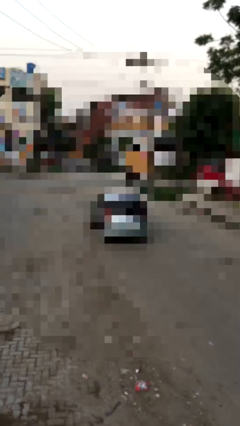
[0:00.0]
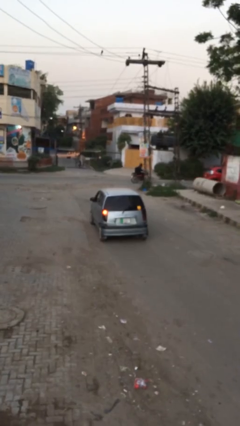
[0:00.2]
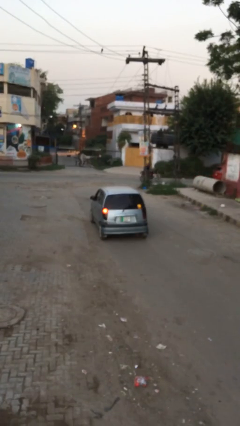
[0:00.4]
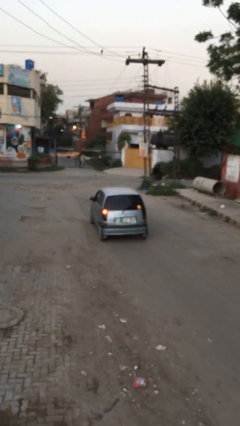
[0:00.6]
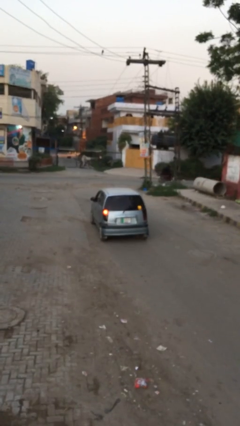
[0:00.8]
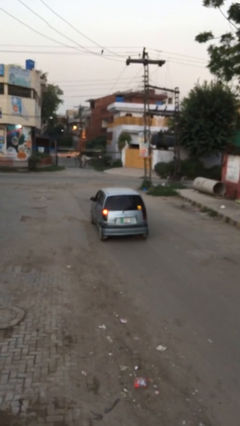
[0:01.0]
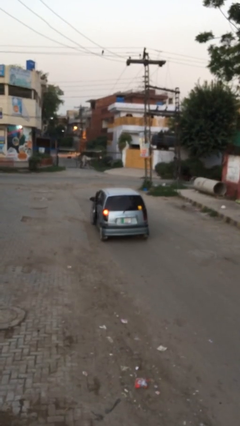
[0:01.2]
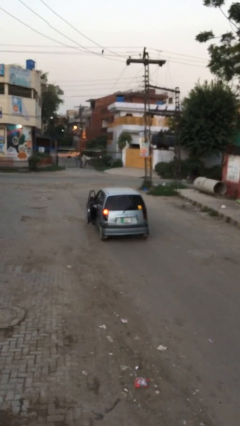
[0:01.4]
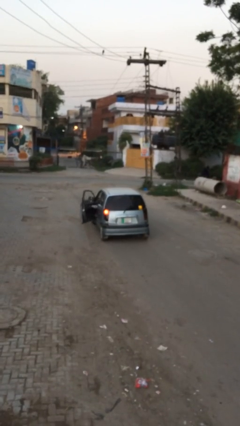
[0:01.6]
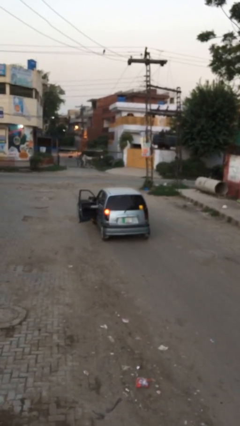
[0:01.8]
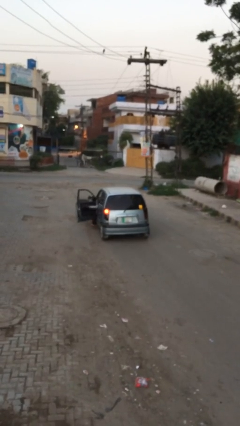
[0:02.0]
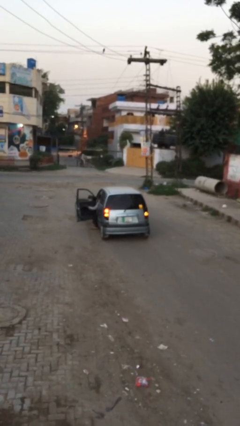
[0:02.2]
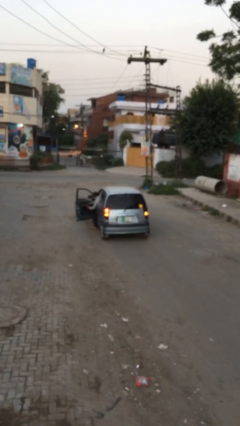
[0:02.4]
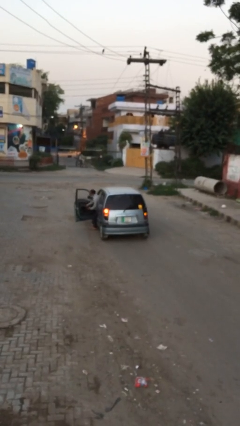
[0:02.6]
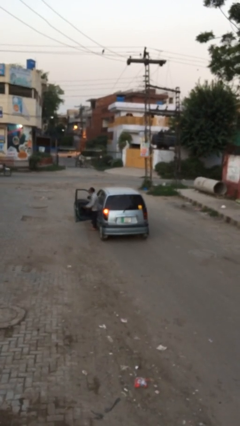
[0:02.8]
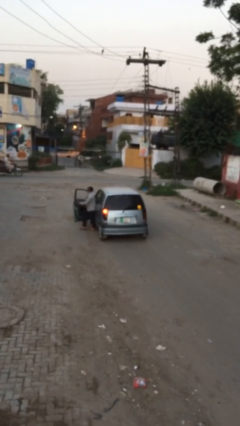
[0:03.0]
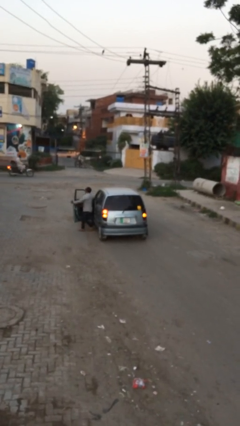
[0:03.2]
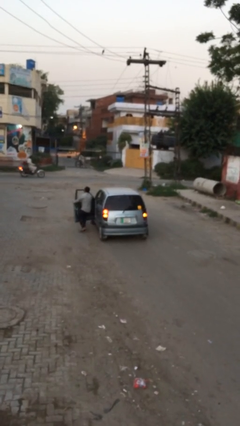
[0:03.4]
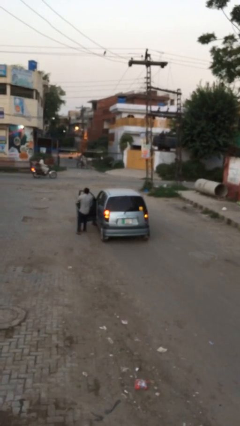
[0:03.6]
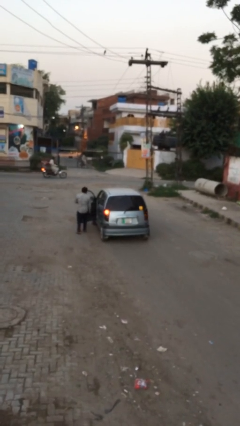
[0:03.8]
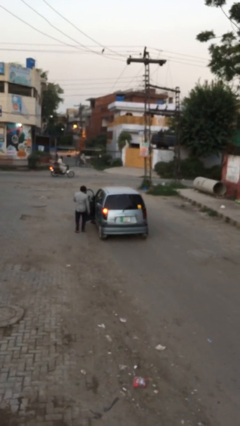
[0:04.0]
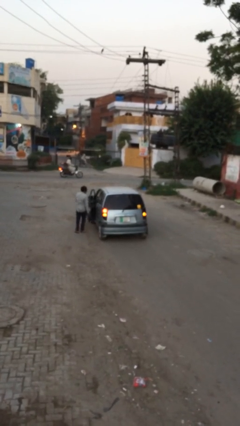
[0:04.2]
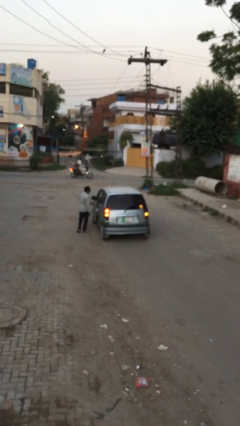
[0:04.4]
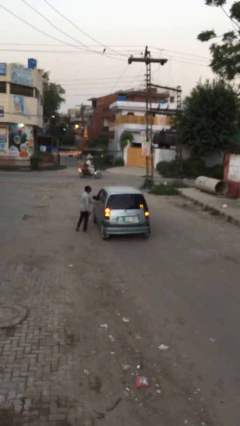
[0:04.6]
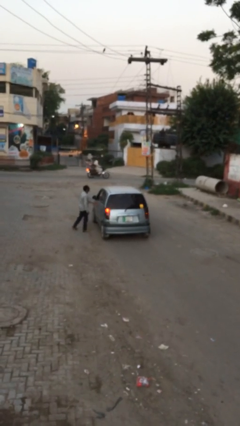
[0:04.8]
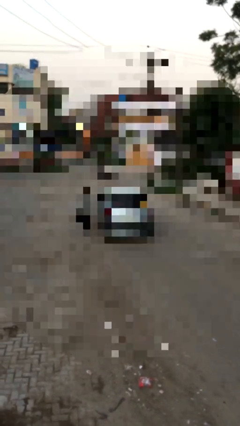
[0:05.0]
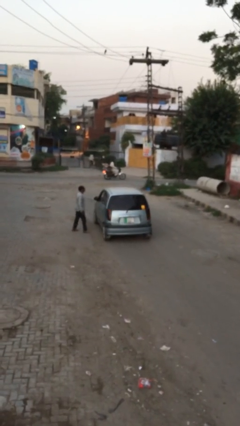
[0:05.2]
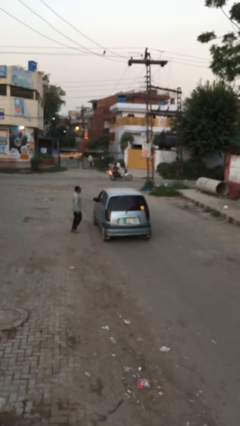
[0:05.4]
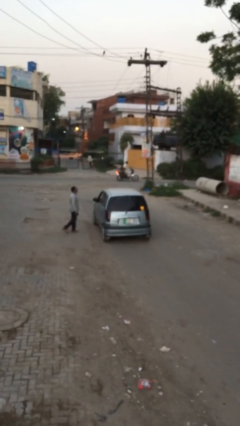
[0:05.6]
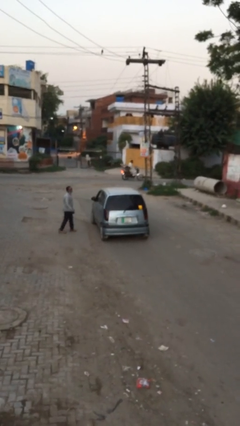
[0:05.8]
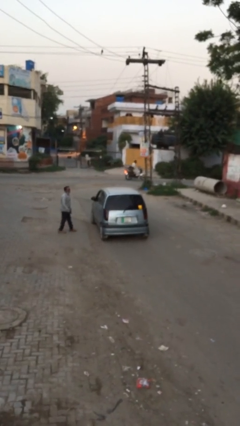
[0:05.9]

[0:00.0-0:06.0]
car drops off person

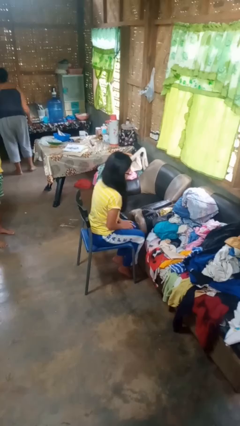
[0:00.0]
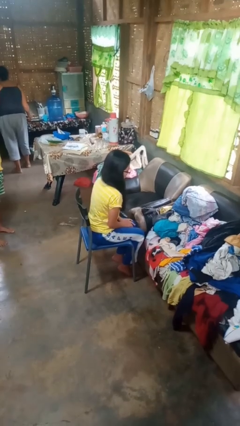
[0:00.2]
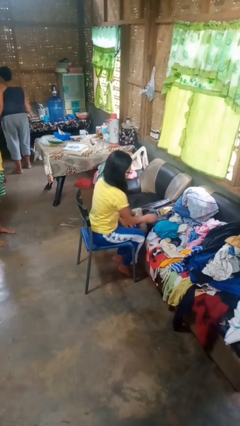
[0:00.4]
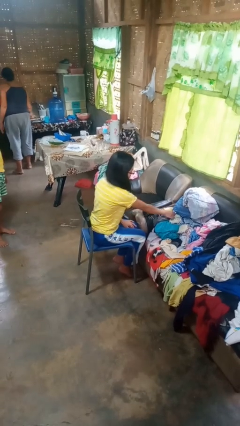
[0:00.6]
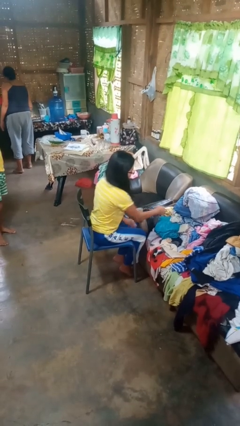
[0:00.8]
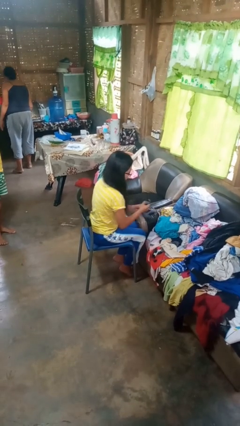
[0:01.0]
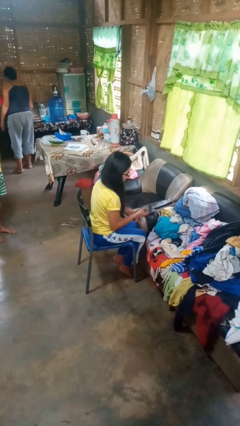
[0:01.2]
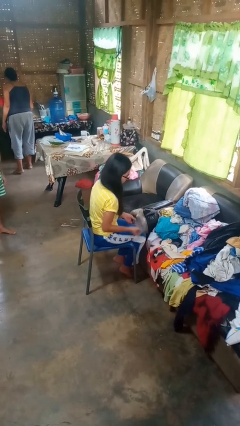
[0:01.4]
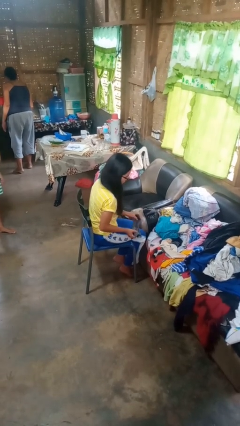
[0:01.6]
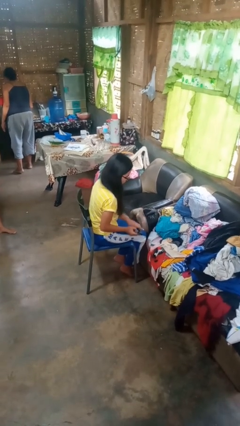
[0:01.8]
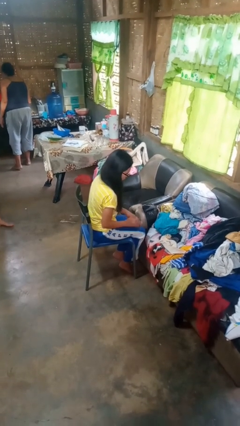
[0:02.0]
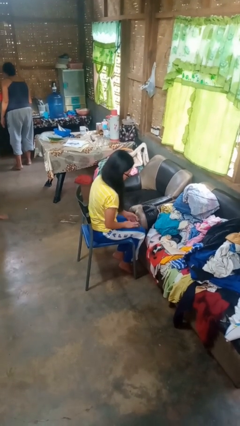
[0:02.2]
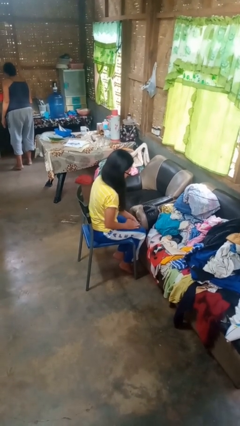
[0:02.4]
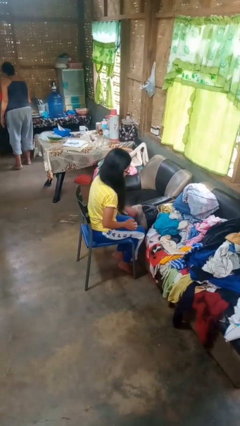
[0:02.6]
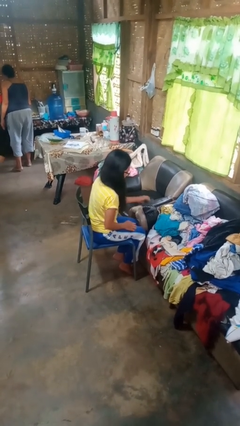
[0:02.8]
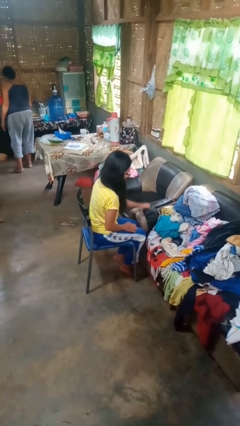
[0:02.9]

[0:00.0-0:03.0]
person folds socks

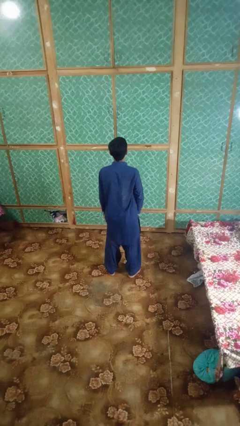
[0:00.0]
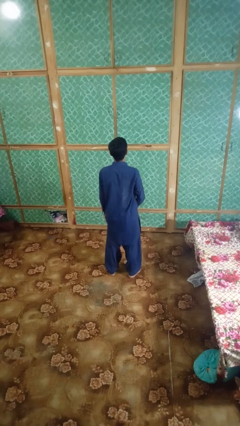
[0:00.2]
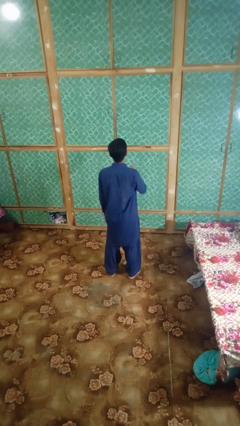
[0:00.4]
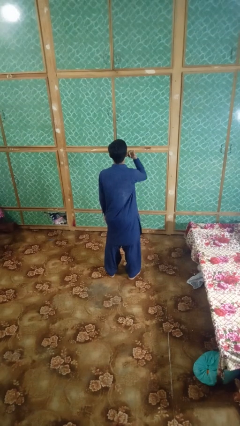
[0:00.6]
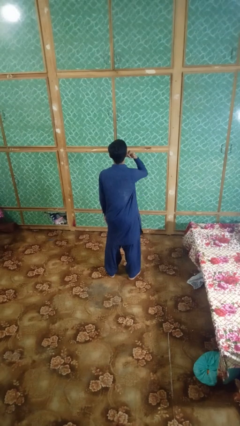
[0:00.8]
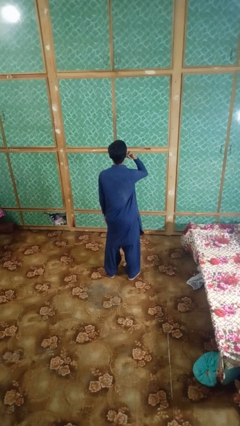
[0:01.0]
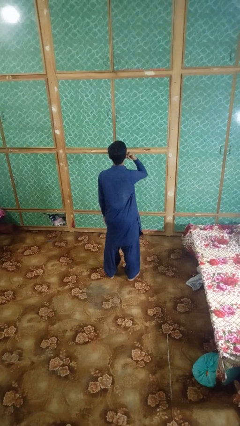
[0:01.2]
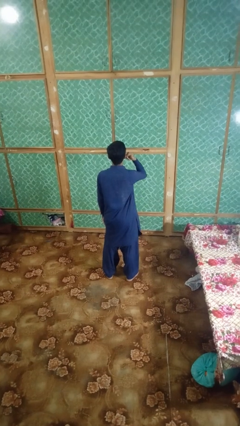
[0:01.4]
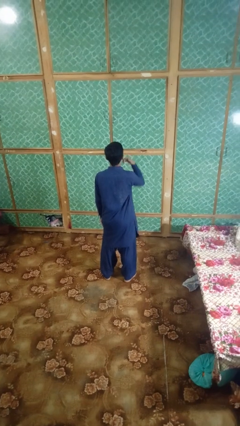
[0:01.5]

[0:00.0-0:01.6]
person gestures call me

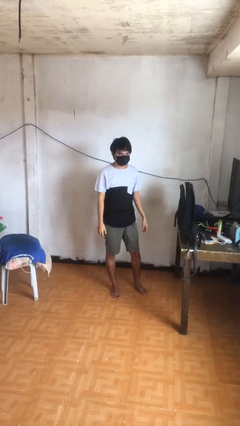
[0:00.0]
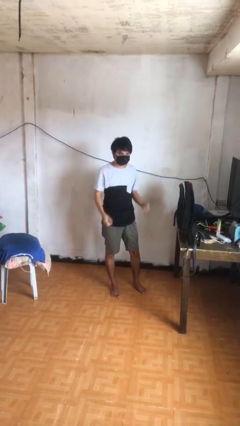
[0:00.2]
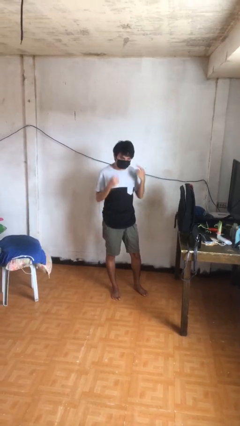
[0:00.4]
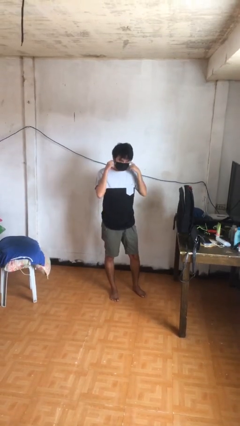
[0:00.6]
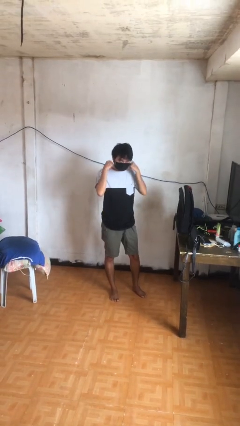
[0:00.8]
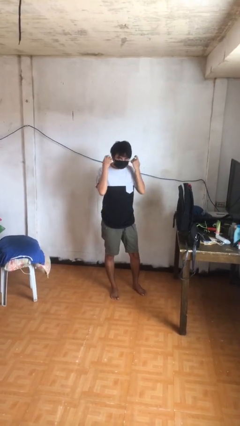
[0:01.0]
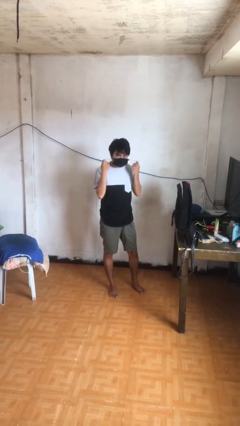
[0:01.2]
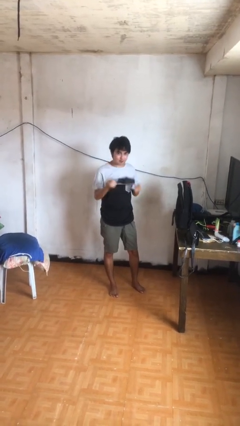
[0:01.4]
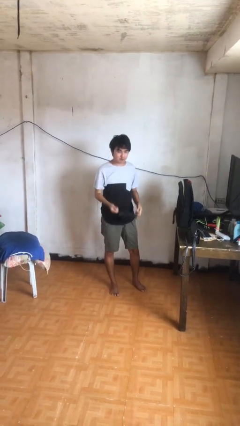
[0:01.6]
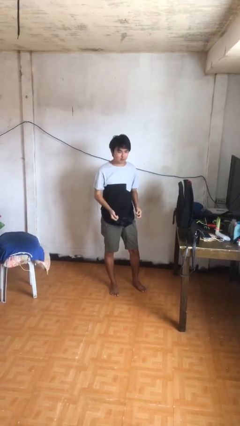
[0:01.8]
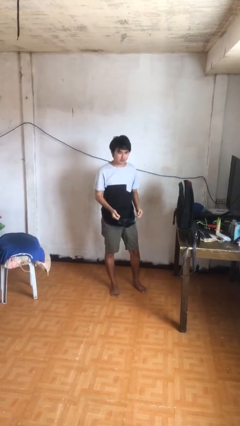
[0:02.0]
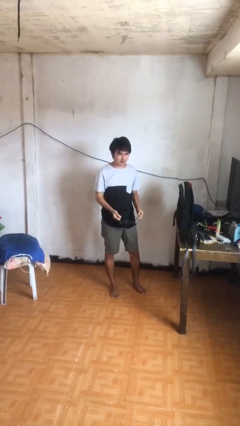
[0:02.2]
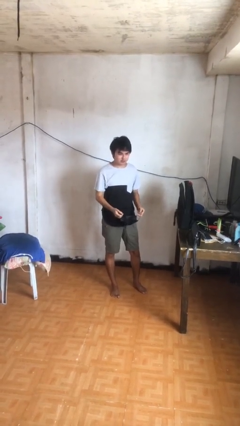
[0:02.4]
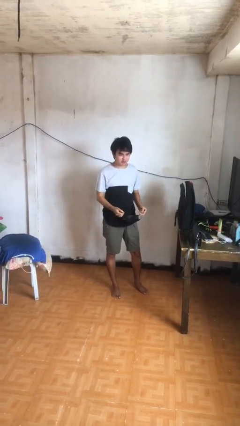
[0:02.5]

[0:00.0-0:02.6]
person takes off facemask

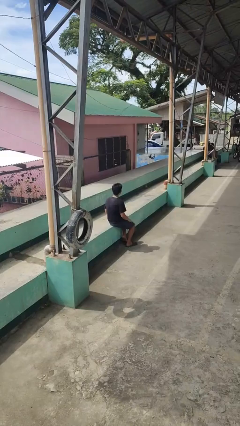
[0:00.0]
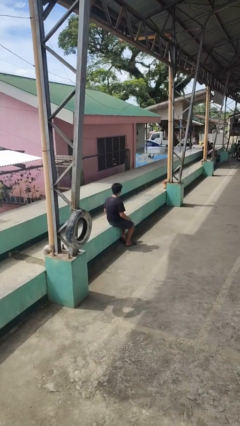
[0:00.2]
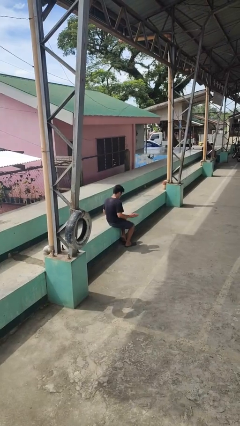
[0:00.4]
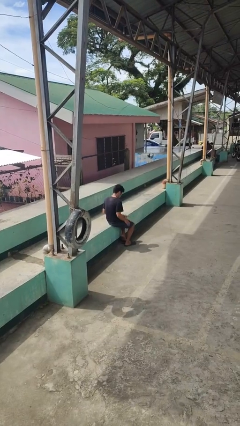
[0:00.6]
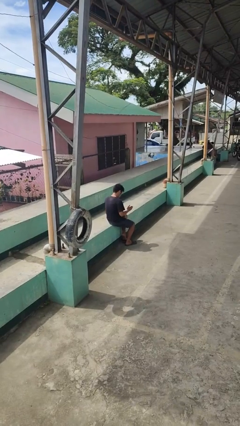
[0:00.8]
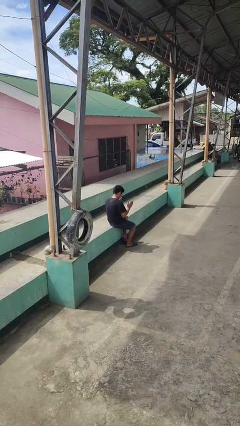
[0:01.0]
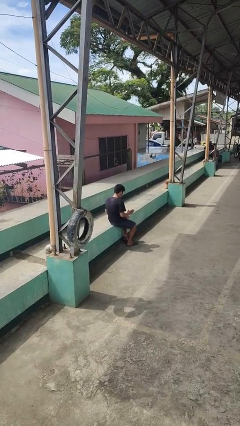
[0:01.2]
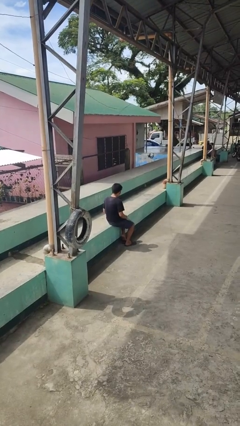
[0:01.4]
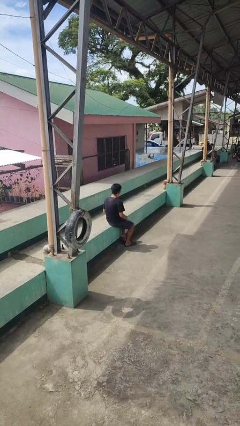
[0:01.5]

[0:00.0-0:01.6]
person slaps hands on thighs

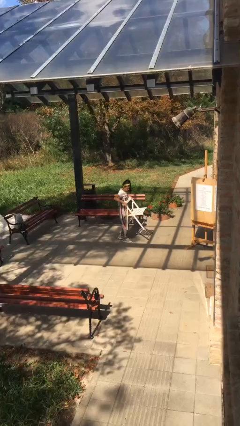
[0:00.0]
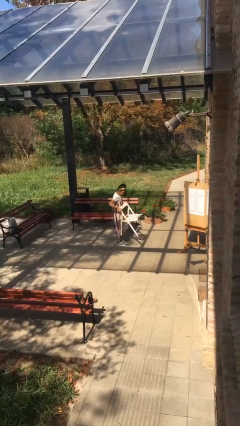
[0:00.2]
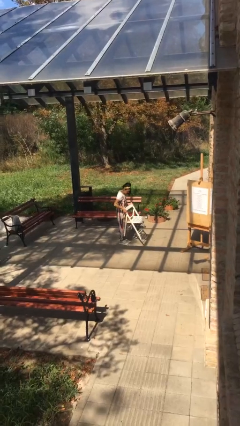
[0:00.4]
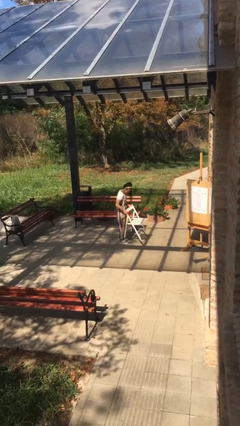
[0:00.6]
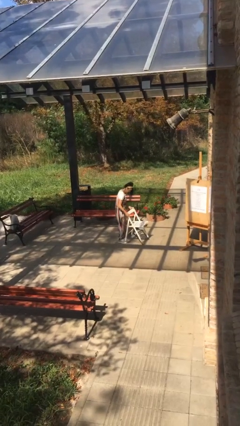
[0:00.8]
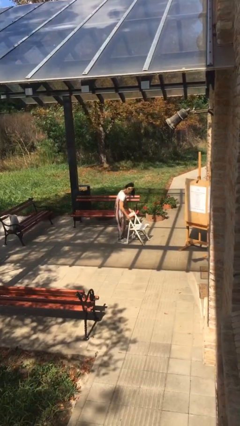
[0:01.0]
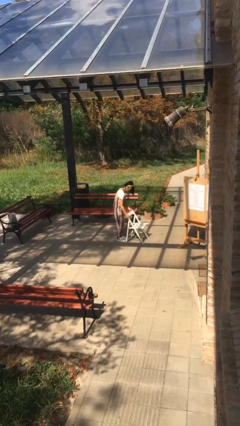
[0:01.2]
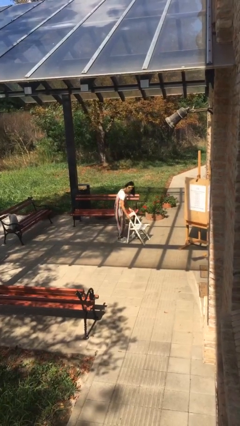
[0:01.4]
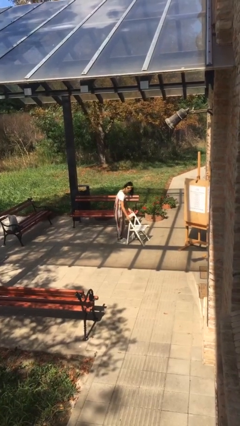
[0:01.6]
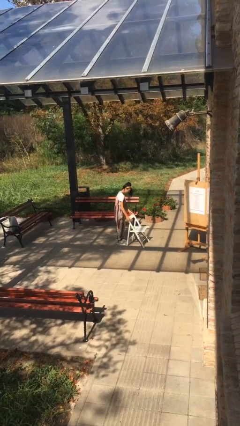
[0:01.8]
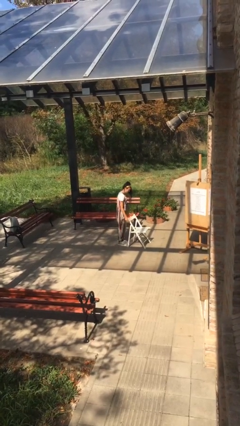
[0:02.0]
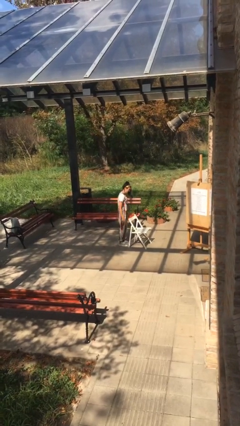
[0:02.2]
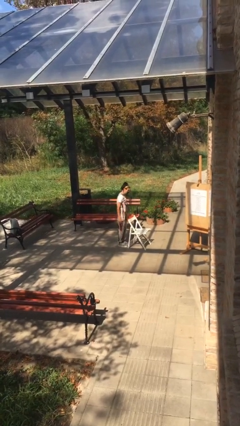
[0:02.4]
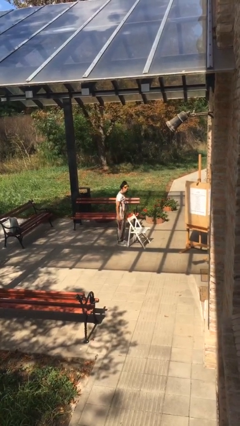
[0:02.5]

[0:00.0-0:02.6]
person puts down object on floor
